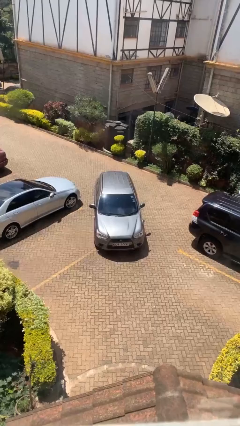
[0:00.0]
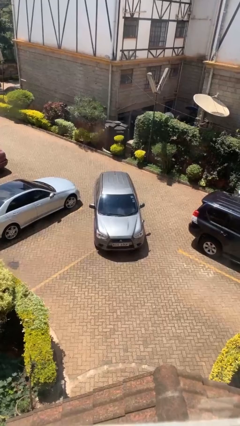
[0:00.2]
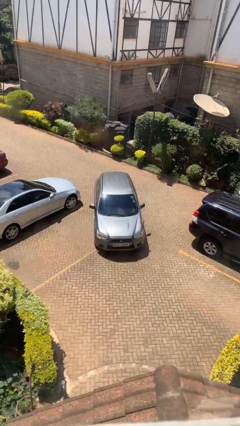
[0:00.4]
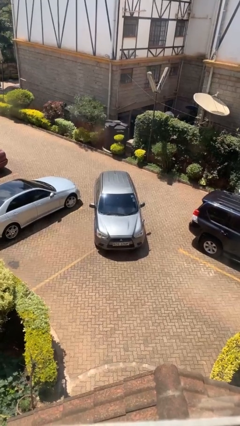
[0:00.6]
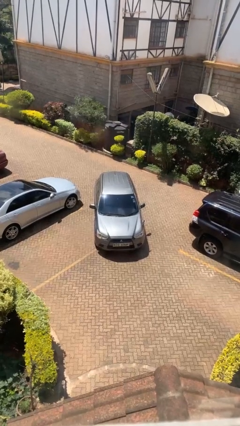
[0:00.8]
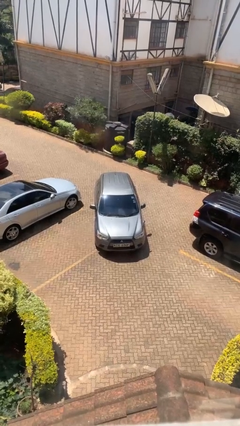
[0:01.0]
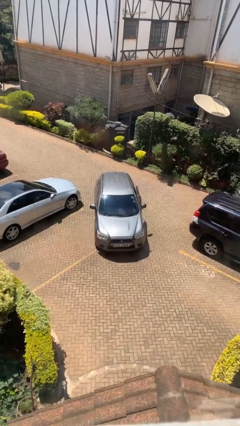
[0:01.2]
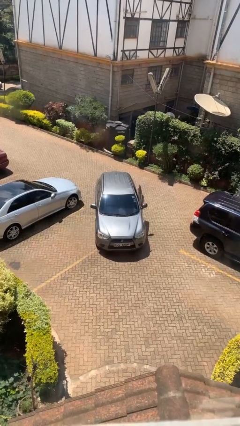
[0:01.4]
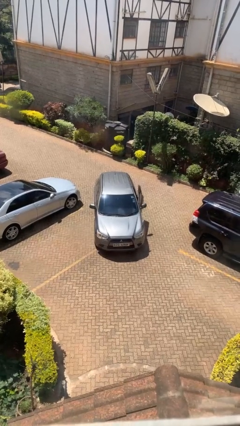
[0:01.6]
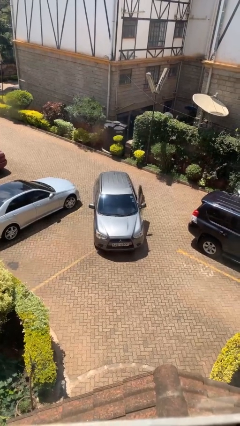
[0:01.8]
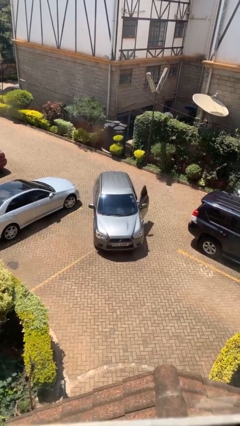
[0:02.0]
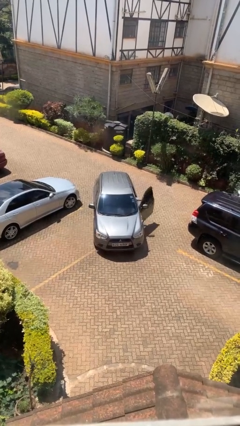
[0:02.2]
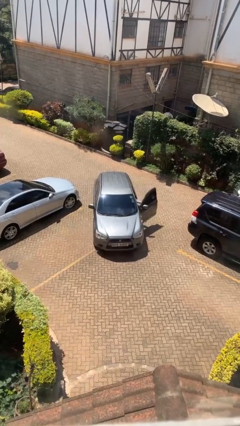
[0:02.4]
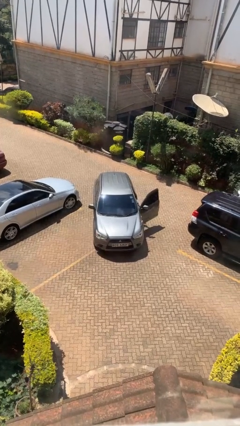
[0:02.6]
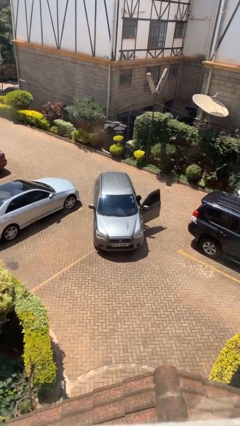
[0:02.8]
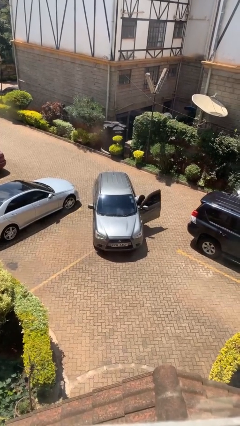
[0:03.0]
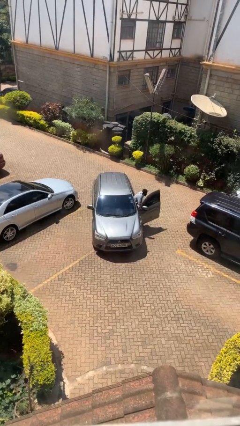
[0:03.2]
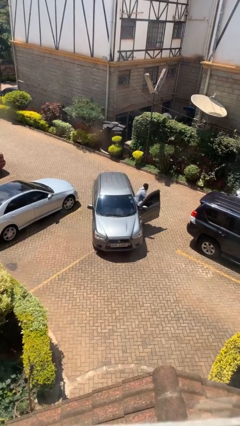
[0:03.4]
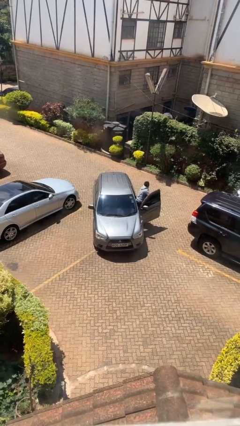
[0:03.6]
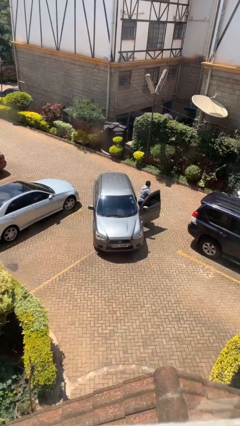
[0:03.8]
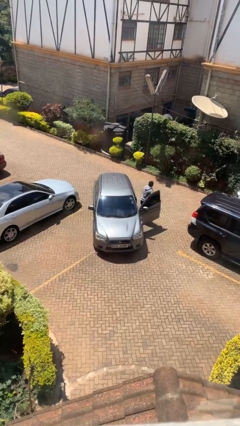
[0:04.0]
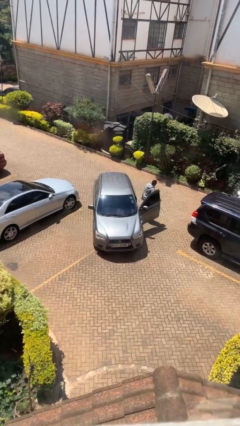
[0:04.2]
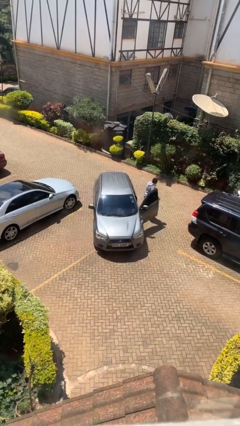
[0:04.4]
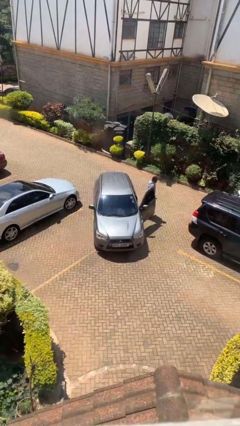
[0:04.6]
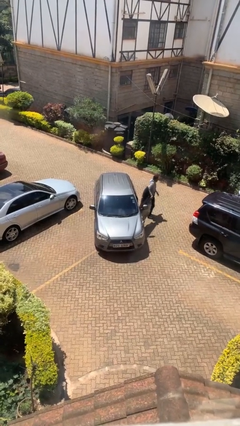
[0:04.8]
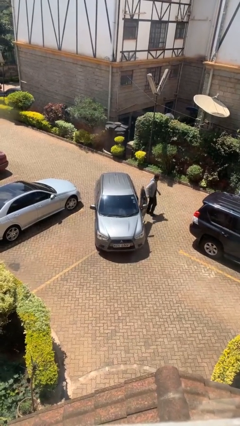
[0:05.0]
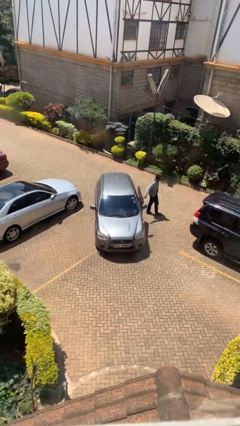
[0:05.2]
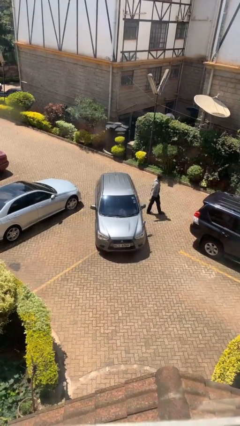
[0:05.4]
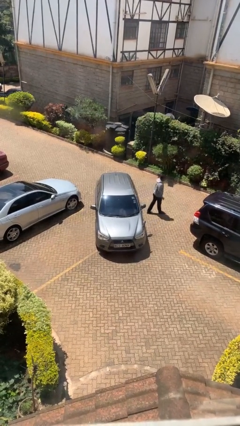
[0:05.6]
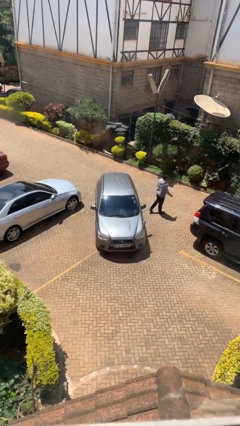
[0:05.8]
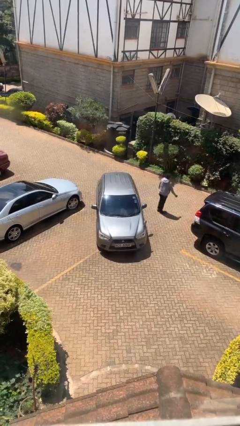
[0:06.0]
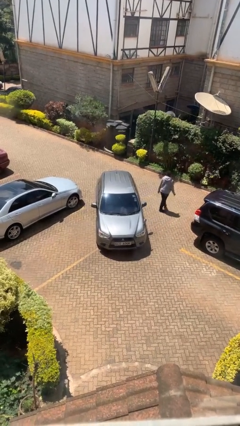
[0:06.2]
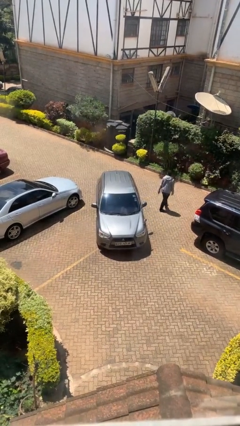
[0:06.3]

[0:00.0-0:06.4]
car drops off person

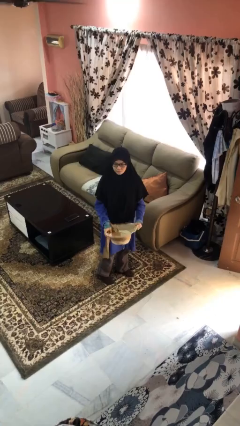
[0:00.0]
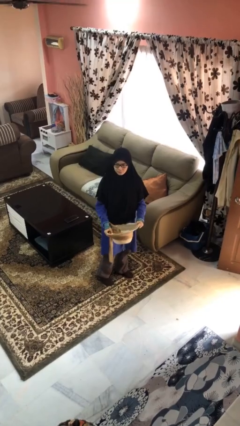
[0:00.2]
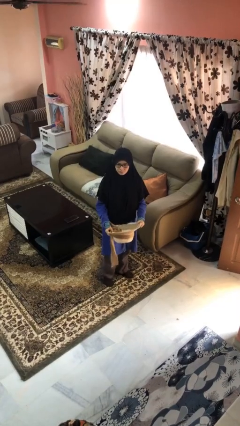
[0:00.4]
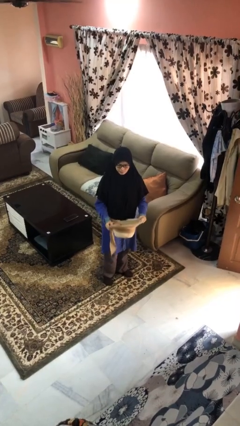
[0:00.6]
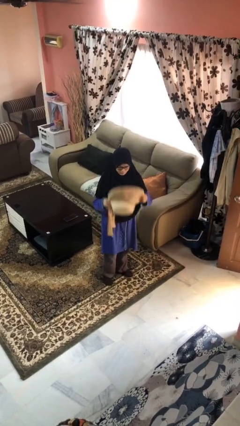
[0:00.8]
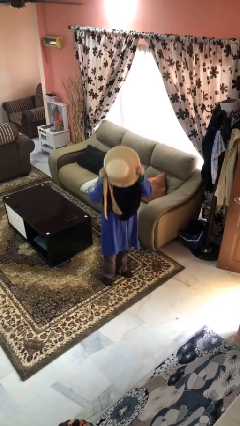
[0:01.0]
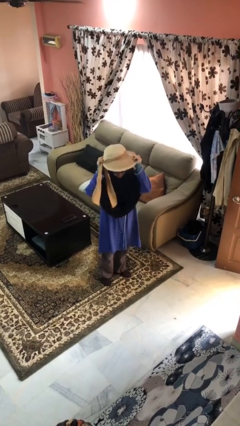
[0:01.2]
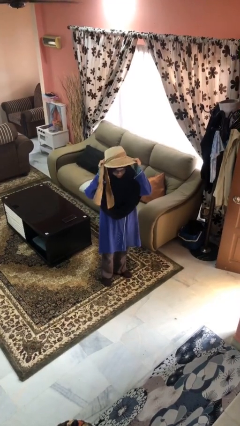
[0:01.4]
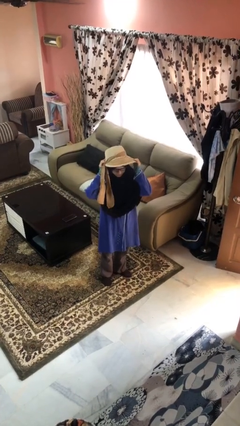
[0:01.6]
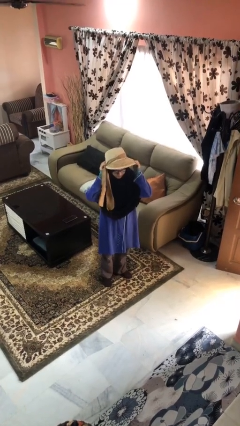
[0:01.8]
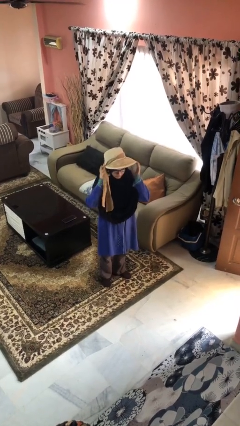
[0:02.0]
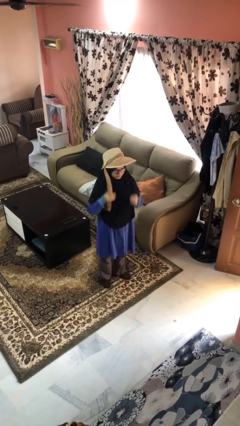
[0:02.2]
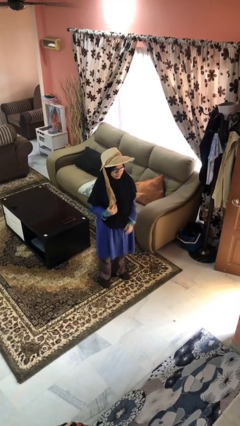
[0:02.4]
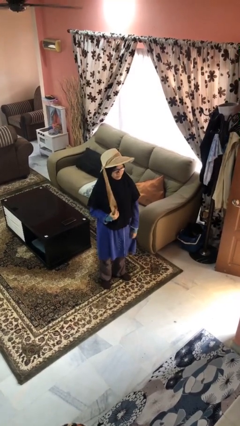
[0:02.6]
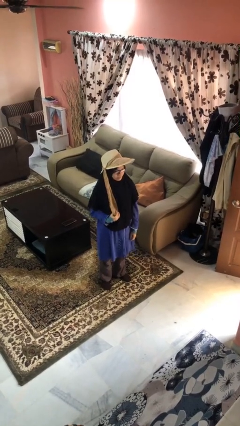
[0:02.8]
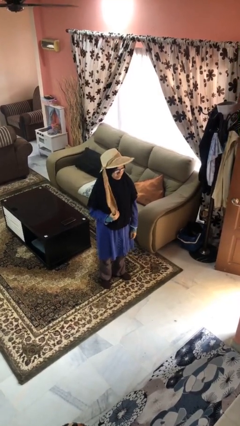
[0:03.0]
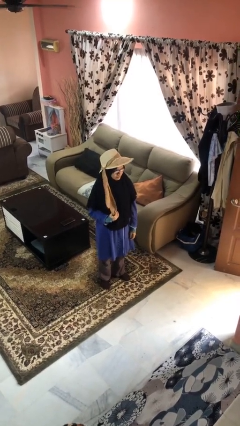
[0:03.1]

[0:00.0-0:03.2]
person puts on hat

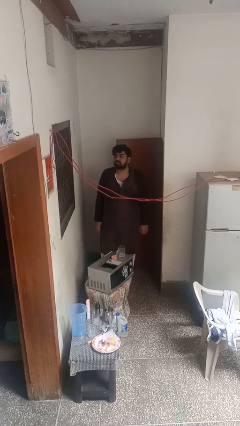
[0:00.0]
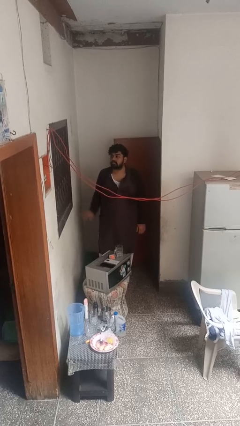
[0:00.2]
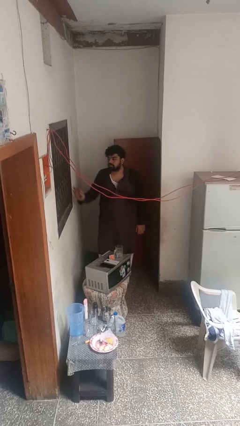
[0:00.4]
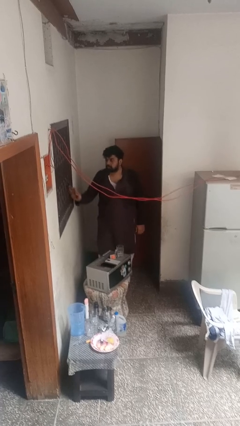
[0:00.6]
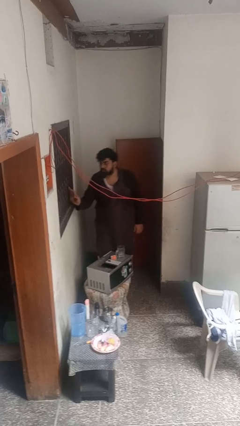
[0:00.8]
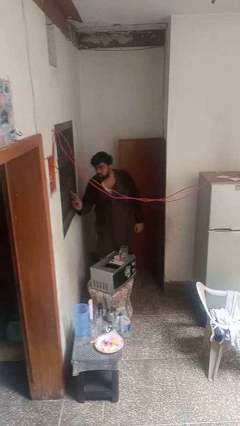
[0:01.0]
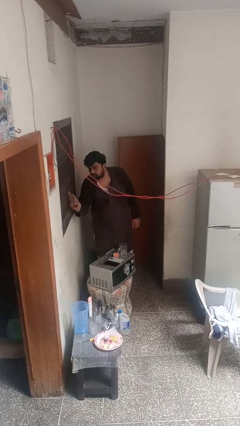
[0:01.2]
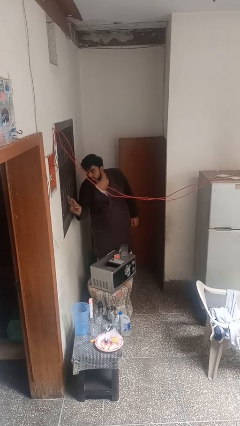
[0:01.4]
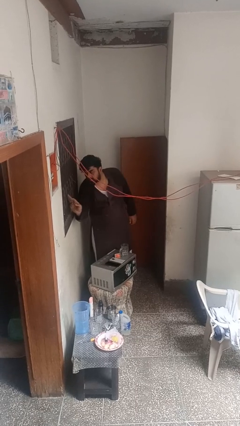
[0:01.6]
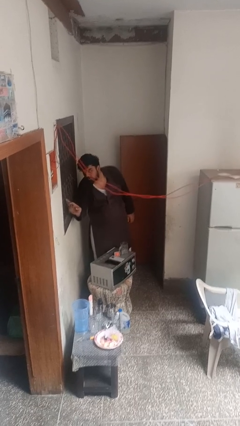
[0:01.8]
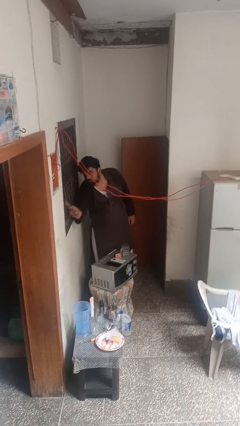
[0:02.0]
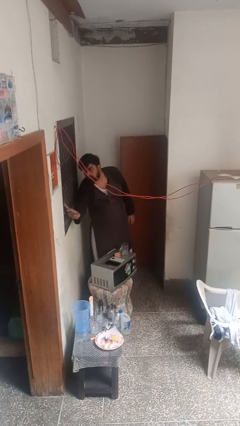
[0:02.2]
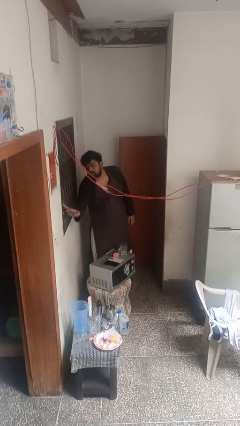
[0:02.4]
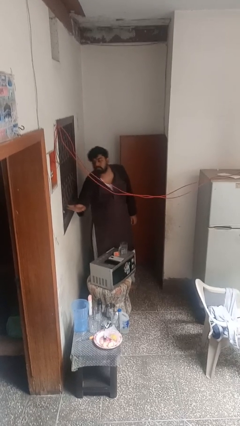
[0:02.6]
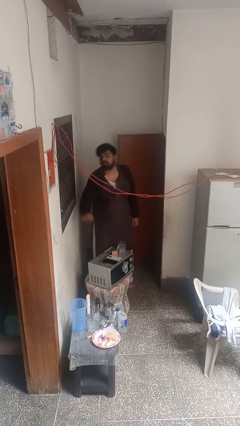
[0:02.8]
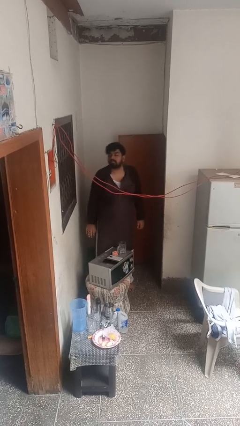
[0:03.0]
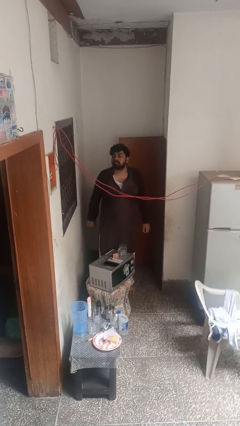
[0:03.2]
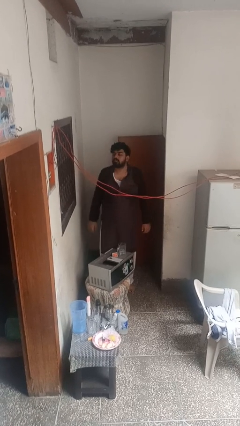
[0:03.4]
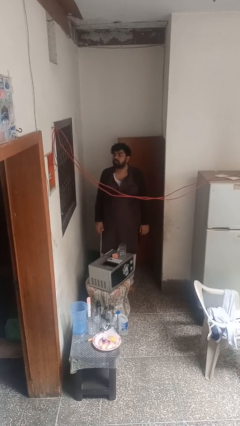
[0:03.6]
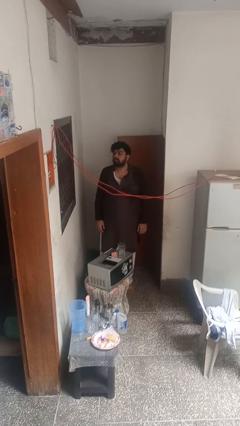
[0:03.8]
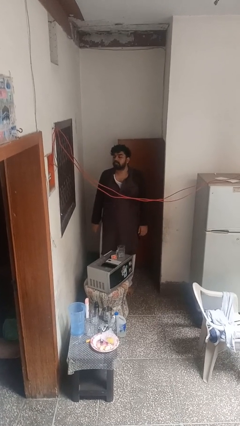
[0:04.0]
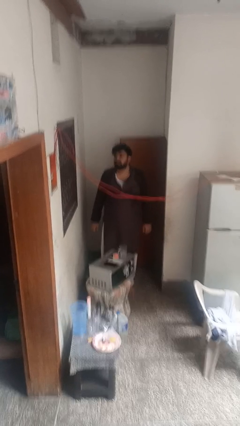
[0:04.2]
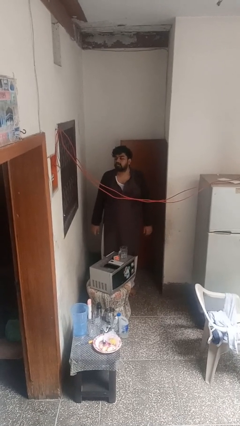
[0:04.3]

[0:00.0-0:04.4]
person opens home window

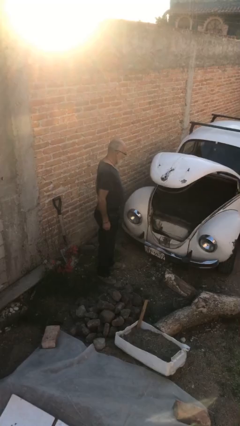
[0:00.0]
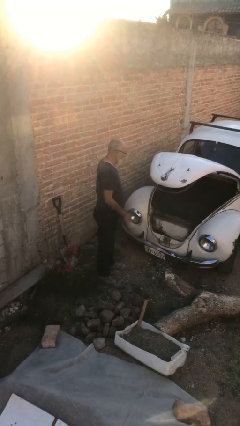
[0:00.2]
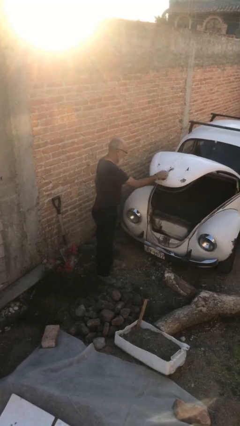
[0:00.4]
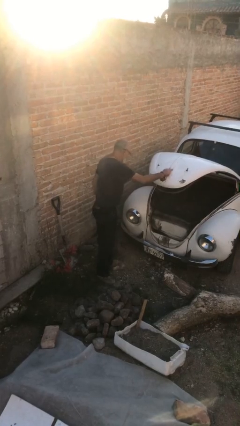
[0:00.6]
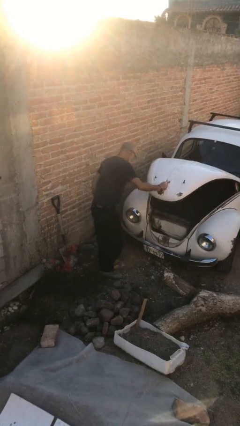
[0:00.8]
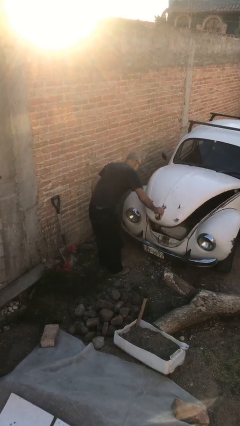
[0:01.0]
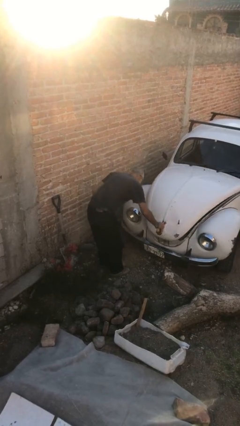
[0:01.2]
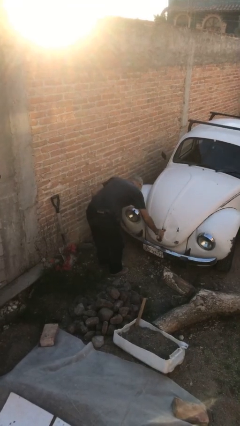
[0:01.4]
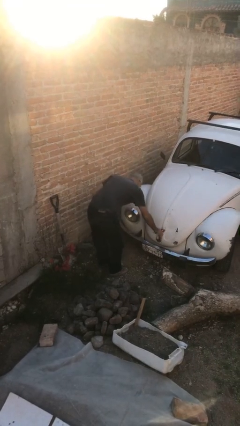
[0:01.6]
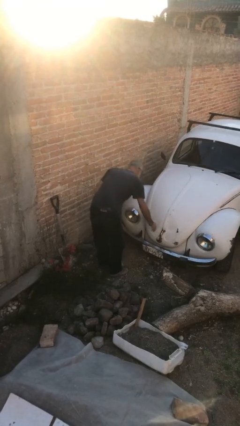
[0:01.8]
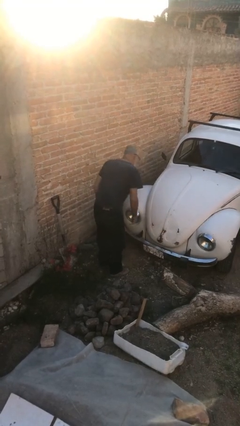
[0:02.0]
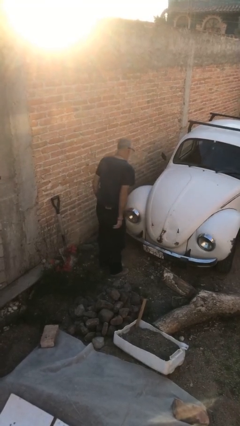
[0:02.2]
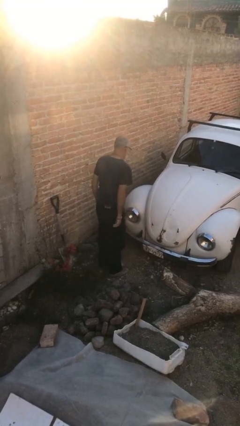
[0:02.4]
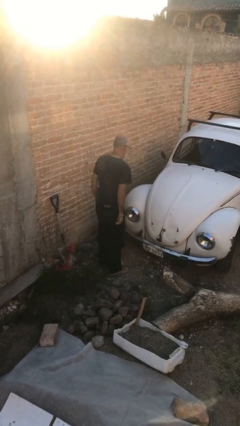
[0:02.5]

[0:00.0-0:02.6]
person closes car trunk

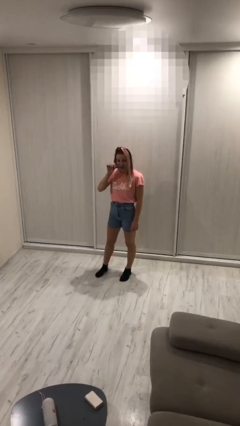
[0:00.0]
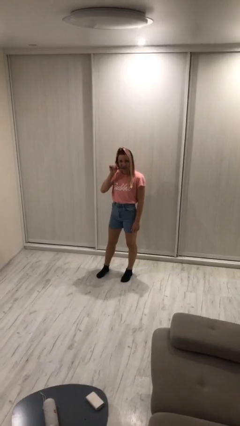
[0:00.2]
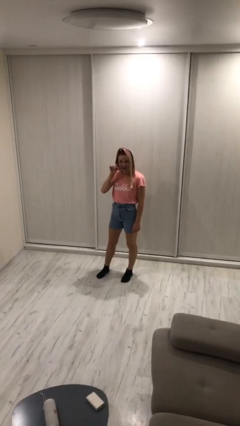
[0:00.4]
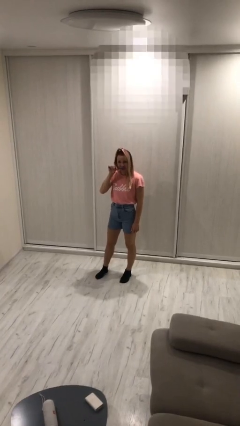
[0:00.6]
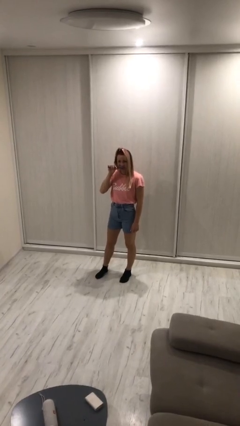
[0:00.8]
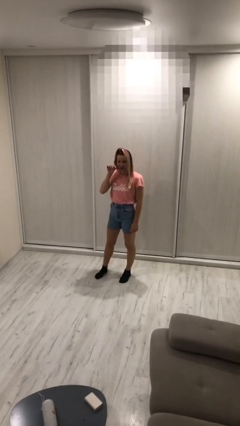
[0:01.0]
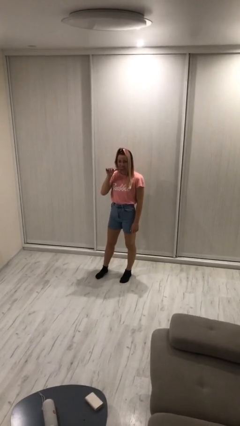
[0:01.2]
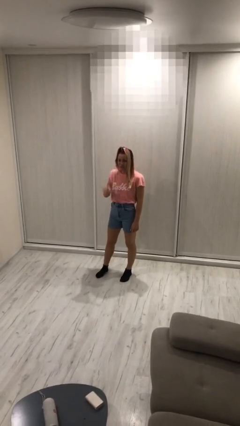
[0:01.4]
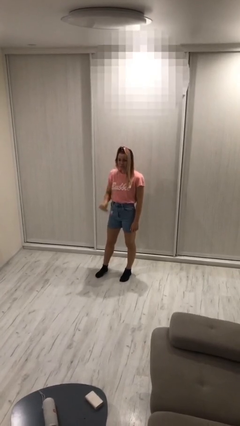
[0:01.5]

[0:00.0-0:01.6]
person brushes teeth
